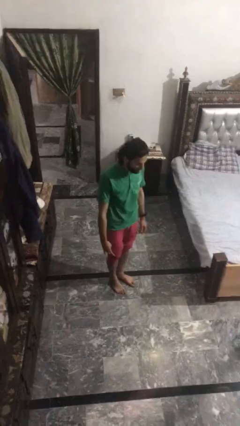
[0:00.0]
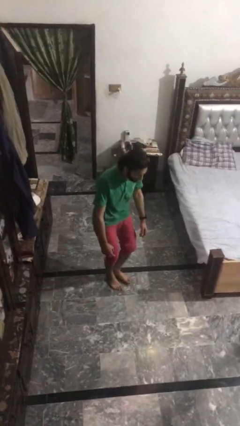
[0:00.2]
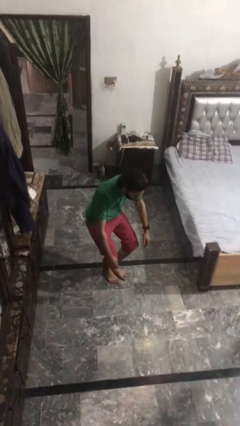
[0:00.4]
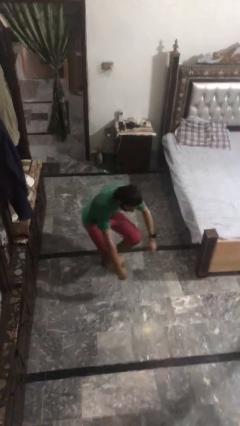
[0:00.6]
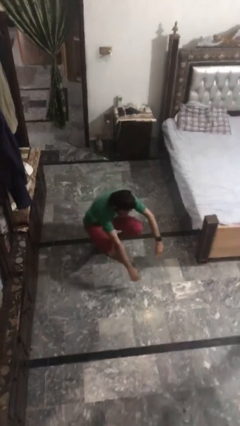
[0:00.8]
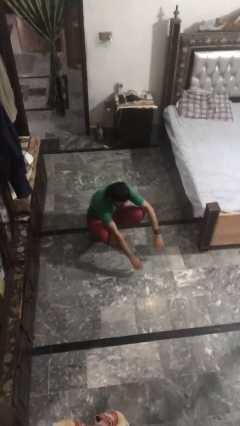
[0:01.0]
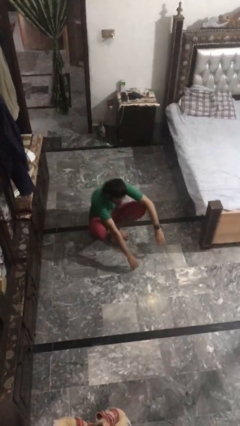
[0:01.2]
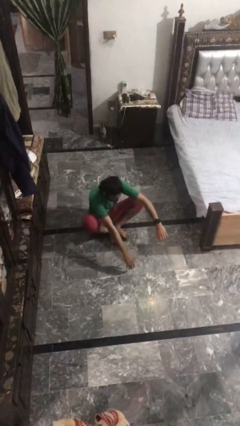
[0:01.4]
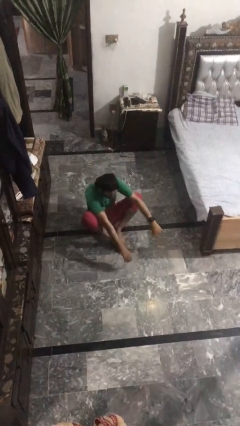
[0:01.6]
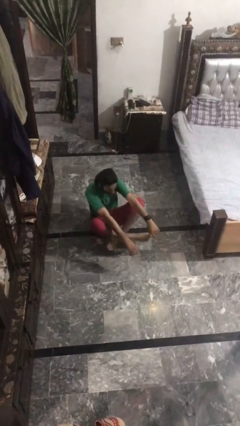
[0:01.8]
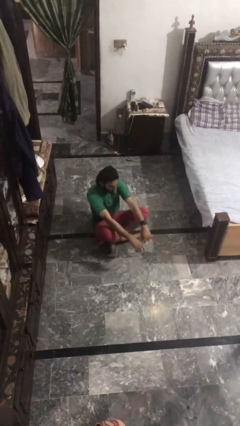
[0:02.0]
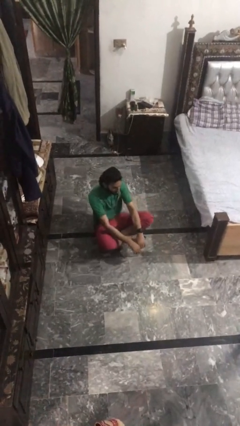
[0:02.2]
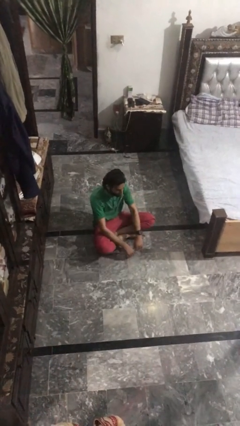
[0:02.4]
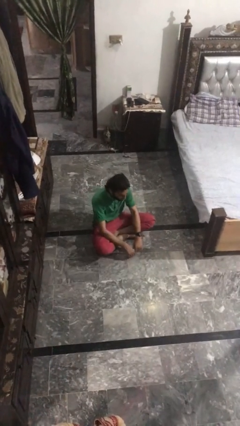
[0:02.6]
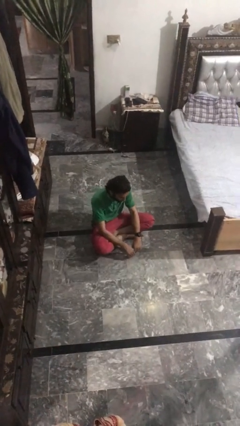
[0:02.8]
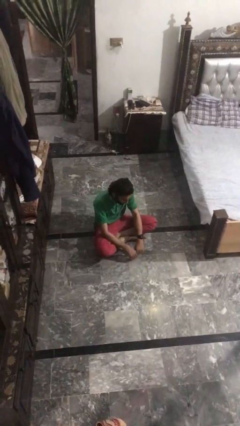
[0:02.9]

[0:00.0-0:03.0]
person sits crisscross

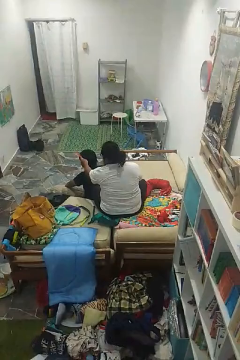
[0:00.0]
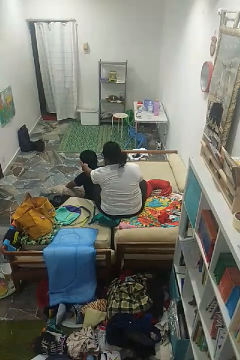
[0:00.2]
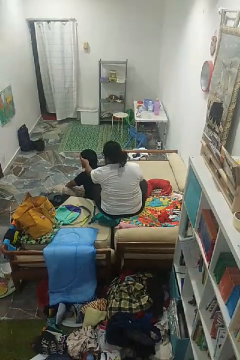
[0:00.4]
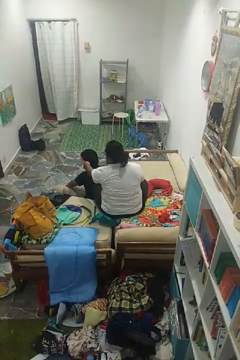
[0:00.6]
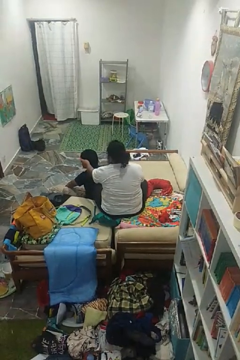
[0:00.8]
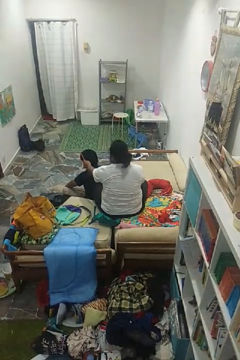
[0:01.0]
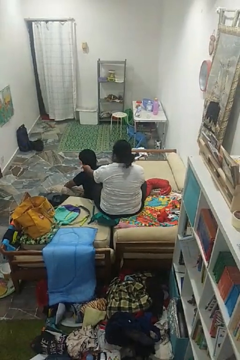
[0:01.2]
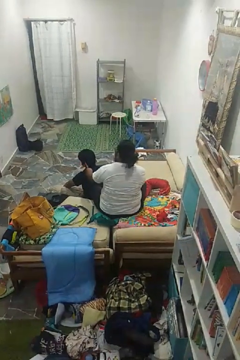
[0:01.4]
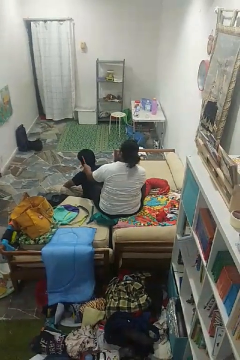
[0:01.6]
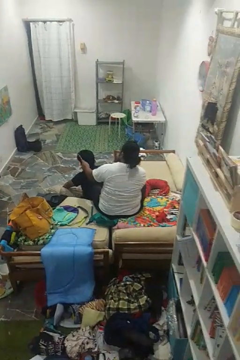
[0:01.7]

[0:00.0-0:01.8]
person brushes hair of person

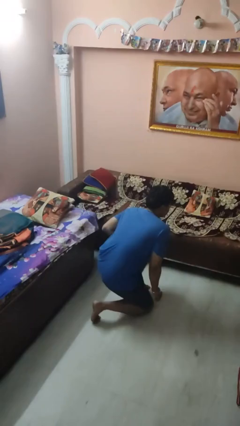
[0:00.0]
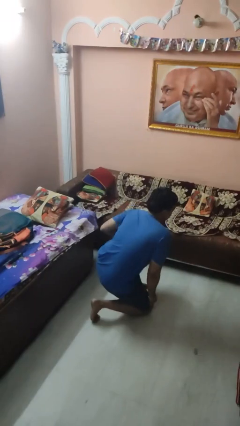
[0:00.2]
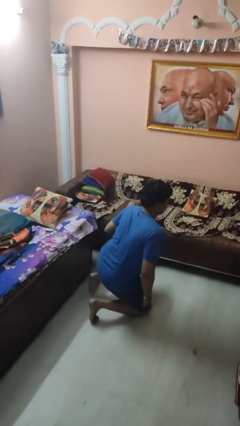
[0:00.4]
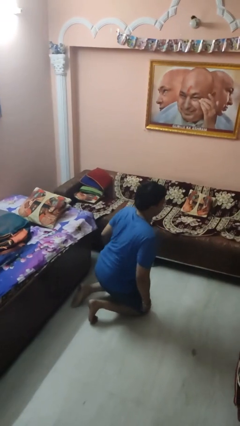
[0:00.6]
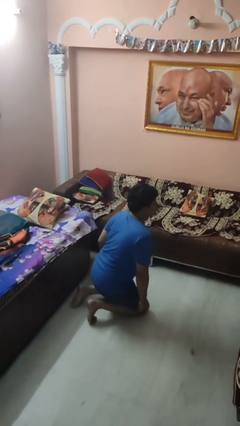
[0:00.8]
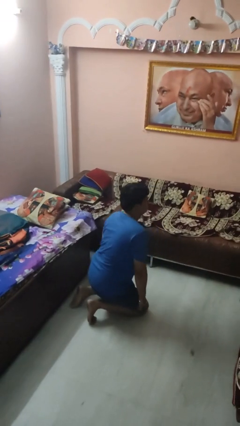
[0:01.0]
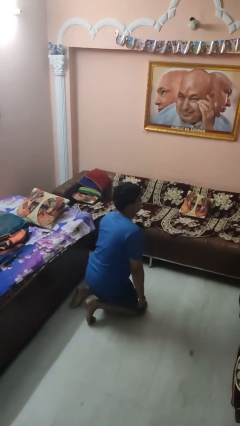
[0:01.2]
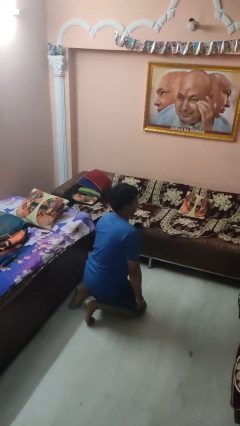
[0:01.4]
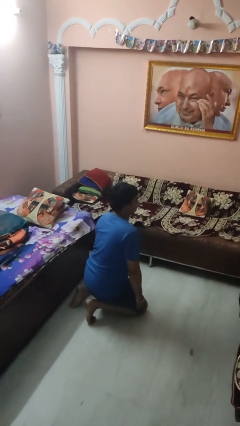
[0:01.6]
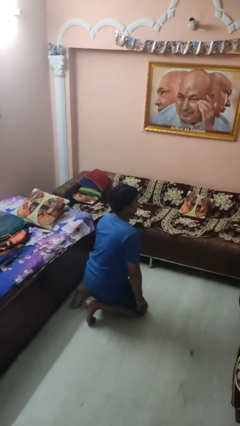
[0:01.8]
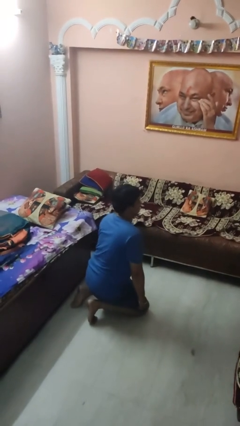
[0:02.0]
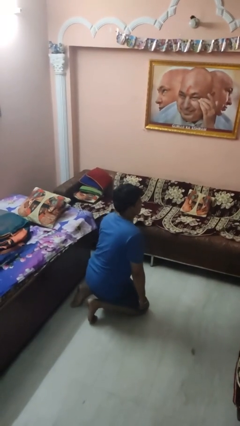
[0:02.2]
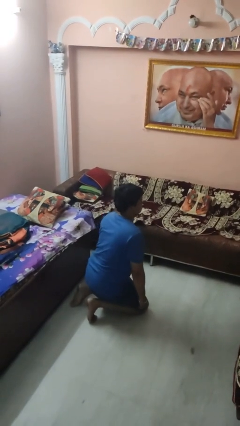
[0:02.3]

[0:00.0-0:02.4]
person kneels

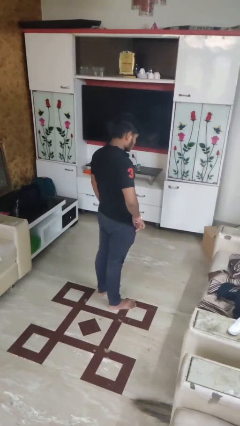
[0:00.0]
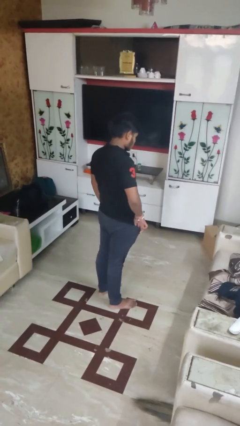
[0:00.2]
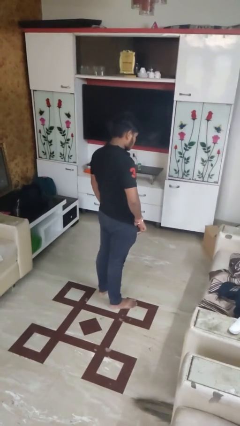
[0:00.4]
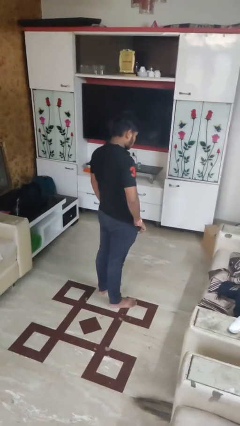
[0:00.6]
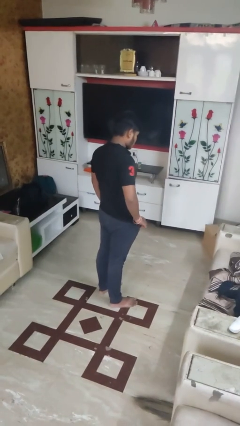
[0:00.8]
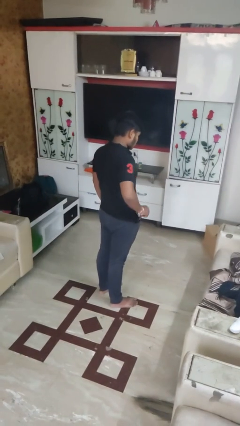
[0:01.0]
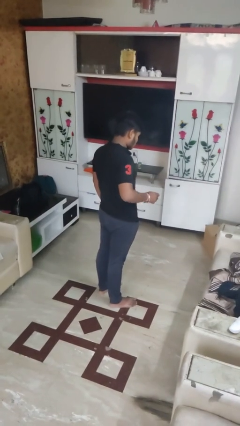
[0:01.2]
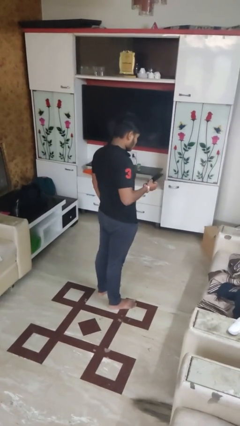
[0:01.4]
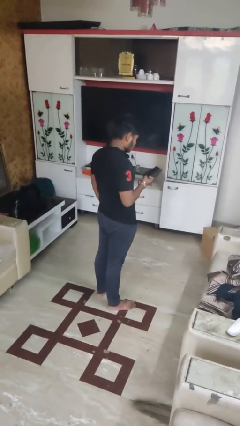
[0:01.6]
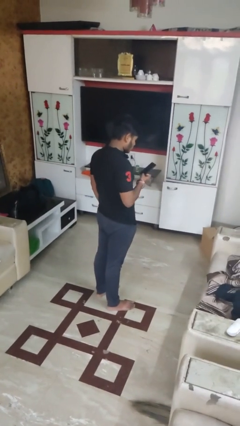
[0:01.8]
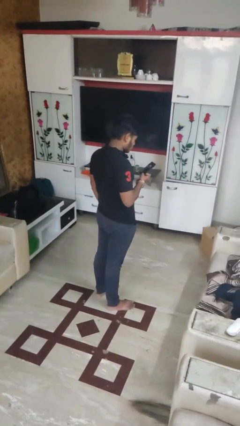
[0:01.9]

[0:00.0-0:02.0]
person takes phone from pocket

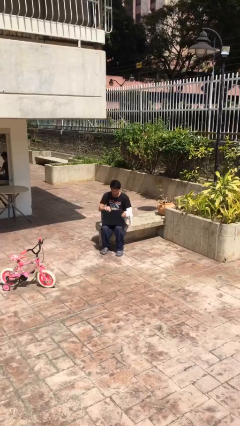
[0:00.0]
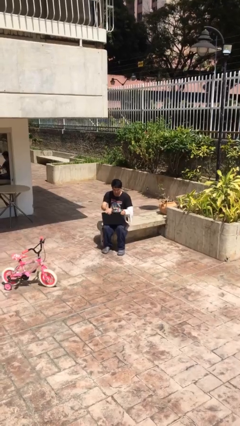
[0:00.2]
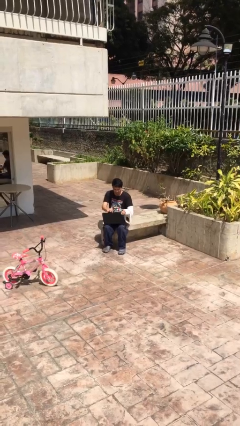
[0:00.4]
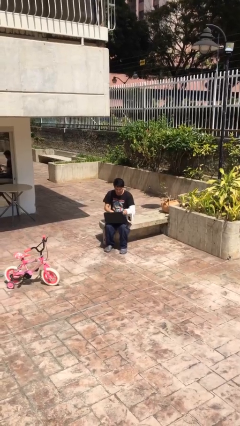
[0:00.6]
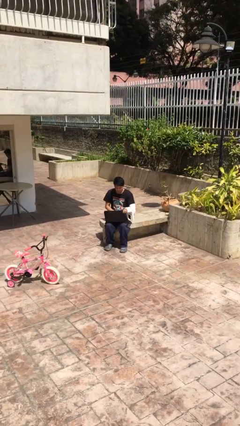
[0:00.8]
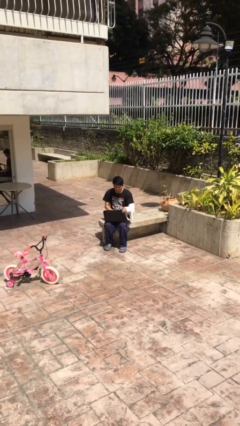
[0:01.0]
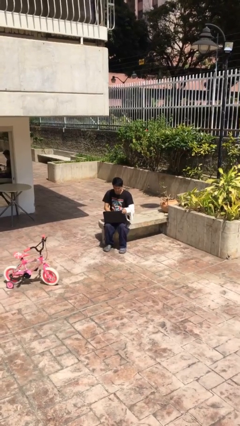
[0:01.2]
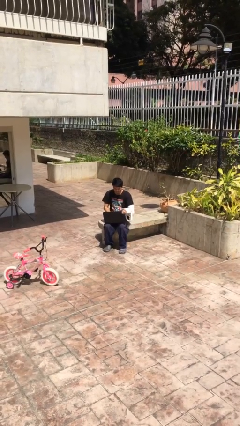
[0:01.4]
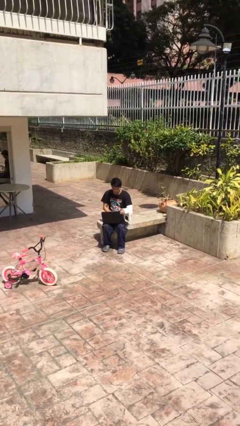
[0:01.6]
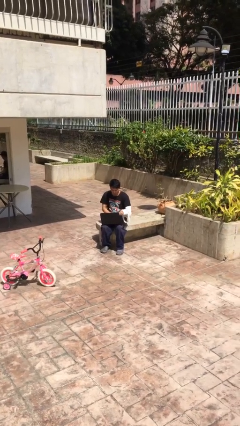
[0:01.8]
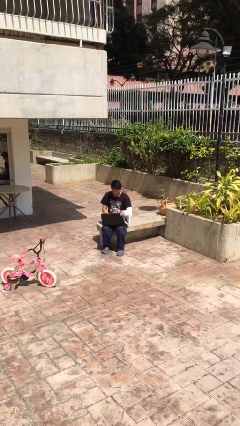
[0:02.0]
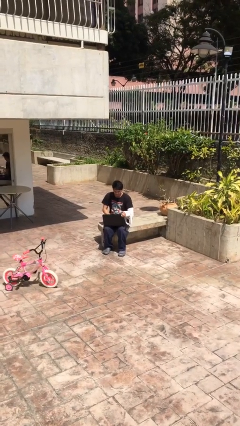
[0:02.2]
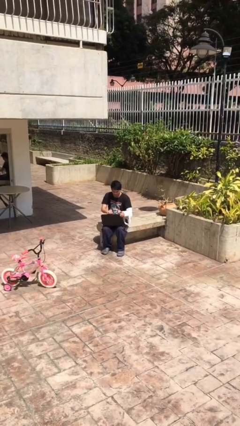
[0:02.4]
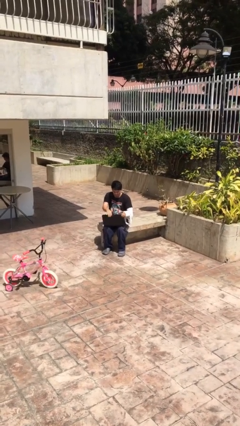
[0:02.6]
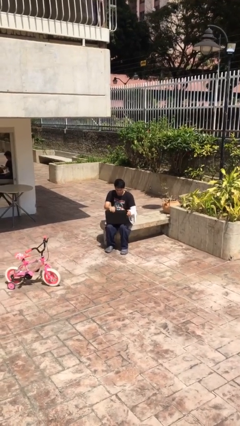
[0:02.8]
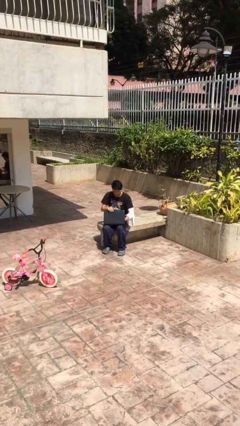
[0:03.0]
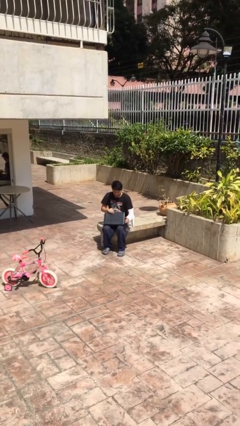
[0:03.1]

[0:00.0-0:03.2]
person interacts with laptop

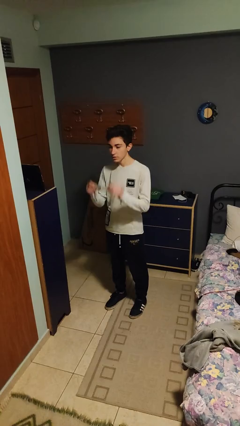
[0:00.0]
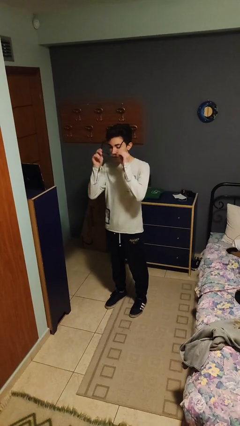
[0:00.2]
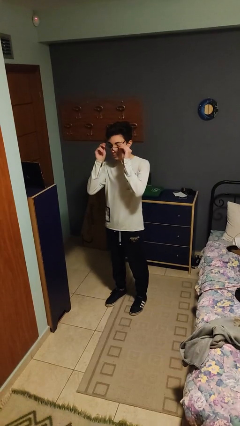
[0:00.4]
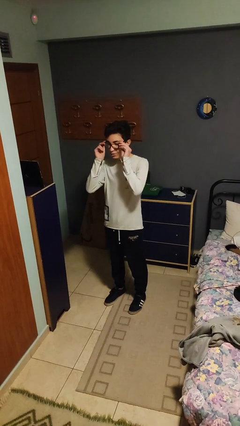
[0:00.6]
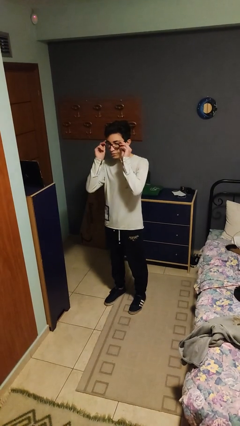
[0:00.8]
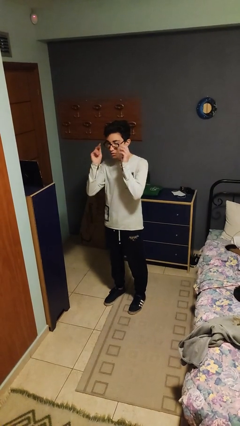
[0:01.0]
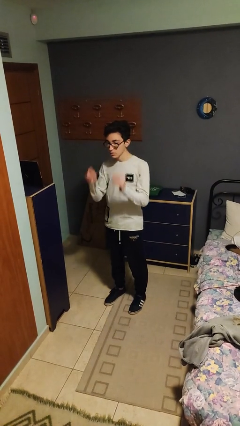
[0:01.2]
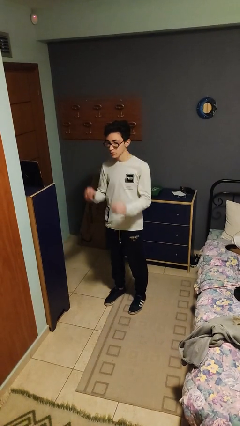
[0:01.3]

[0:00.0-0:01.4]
person puts on glasses

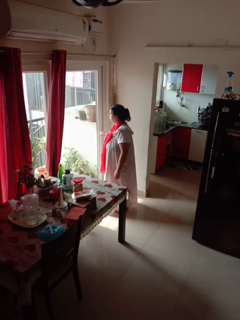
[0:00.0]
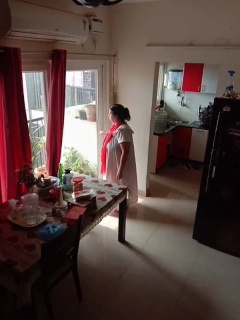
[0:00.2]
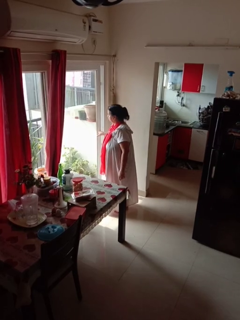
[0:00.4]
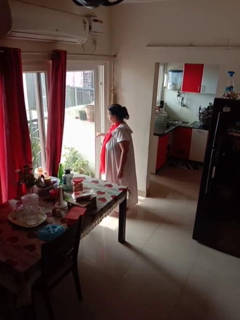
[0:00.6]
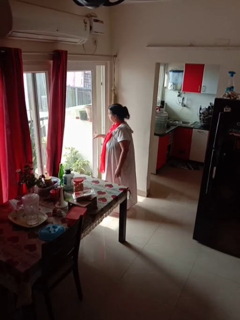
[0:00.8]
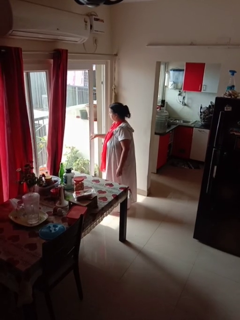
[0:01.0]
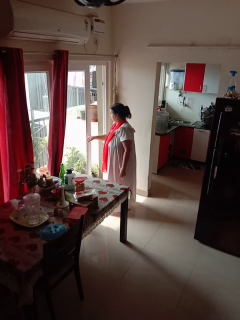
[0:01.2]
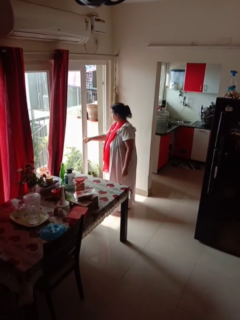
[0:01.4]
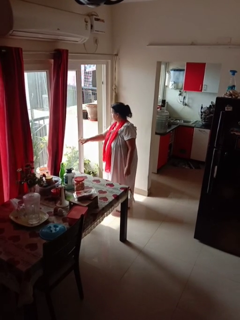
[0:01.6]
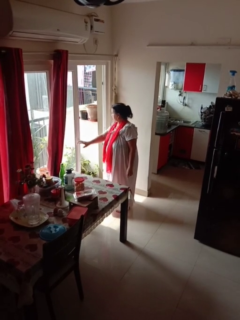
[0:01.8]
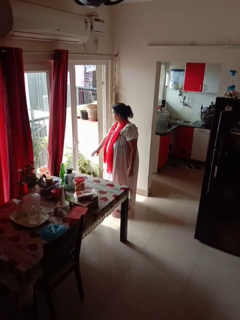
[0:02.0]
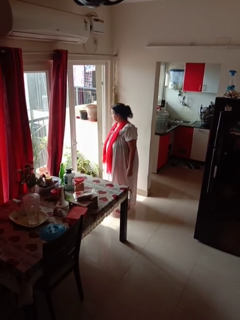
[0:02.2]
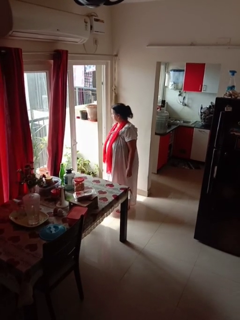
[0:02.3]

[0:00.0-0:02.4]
person opens sliding door

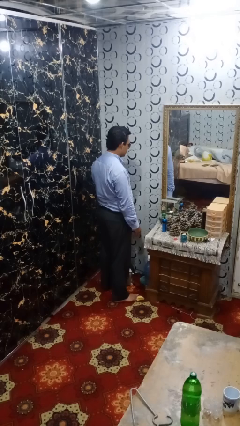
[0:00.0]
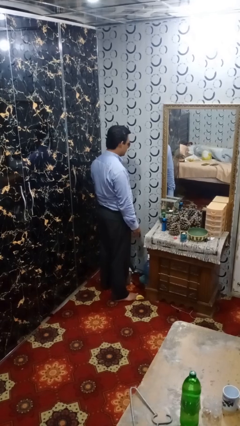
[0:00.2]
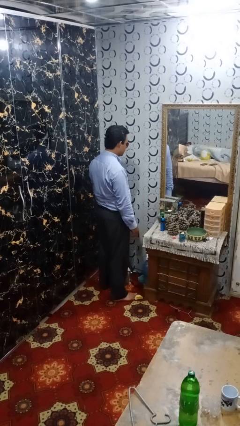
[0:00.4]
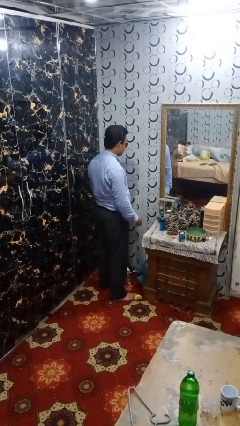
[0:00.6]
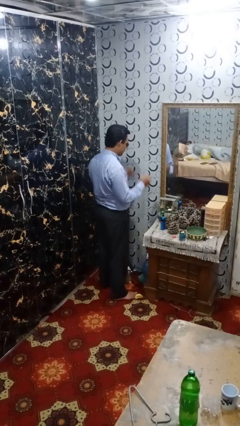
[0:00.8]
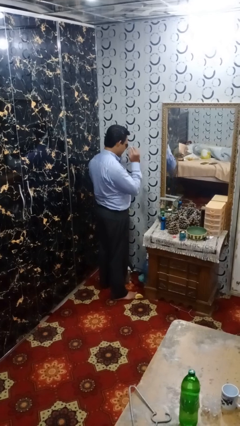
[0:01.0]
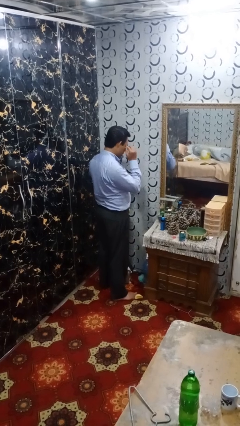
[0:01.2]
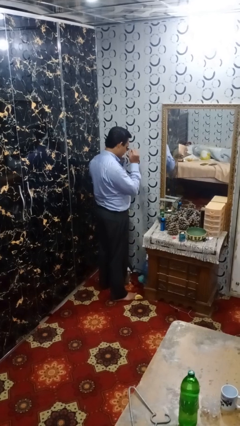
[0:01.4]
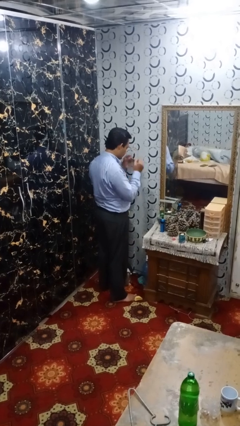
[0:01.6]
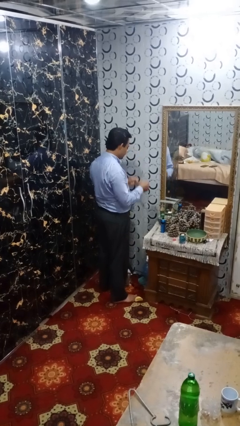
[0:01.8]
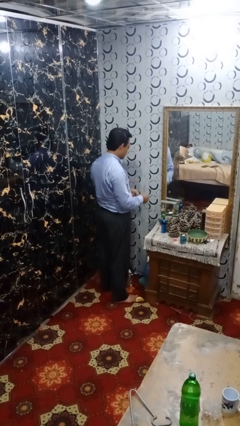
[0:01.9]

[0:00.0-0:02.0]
person takes off sunglasses
